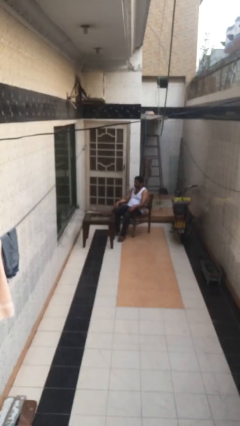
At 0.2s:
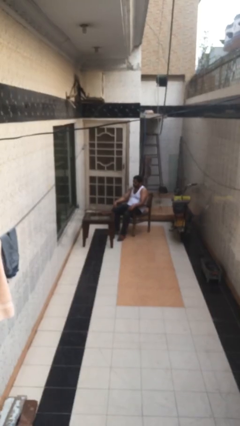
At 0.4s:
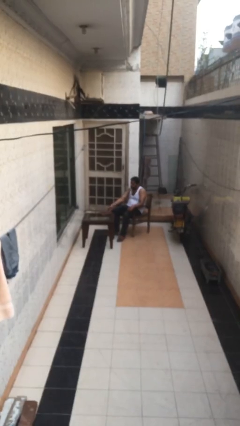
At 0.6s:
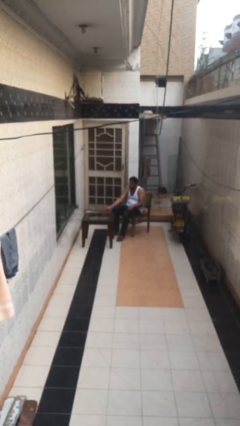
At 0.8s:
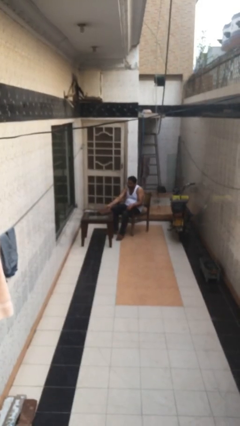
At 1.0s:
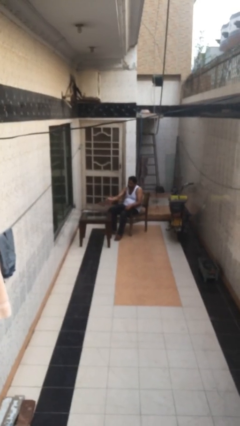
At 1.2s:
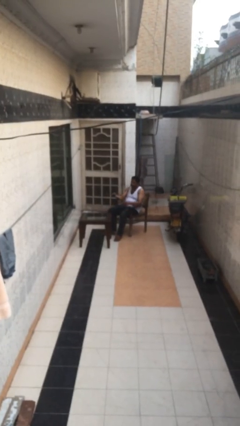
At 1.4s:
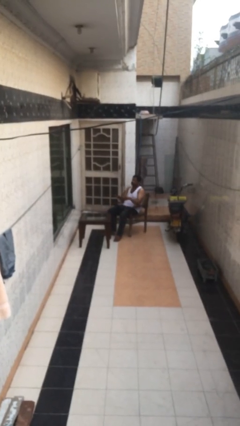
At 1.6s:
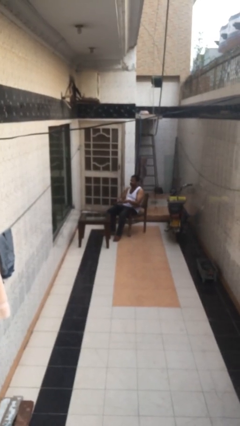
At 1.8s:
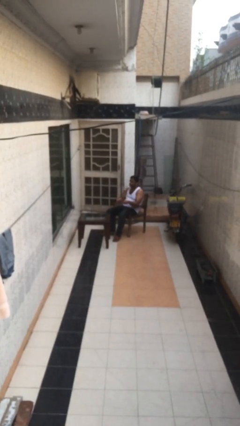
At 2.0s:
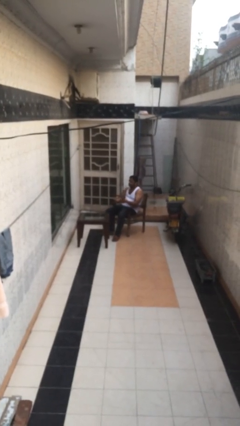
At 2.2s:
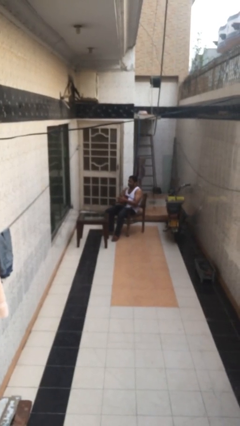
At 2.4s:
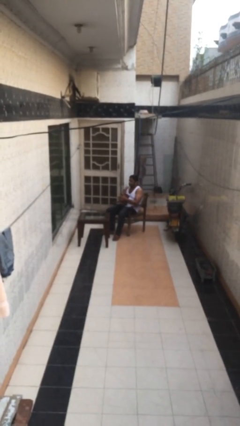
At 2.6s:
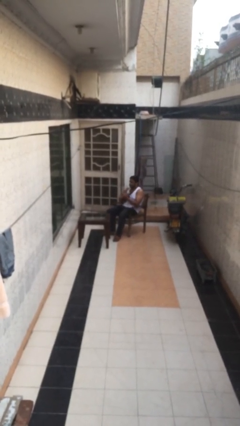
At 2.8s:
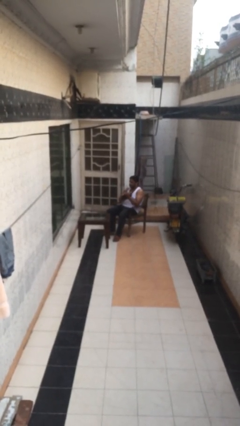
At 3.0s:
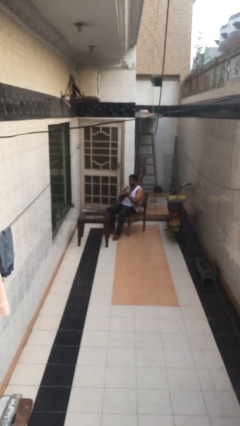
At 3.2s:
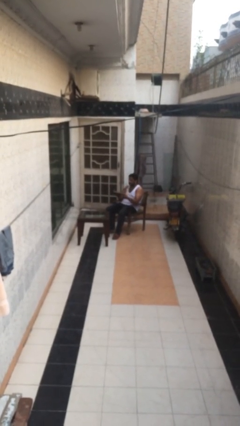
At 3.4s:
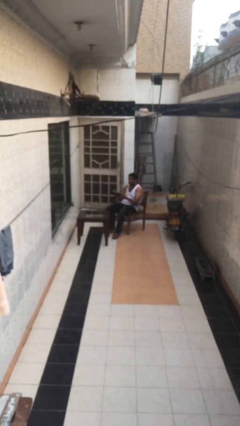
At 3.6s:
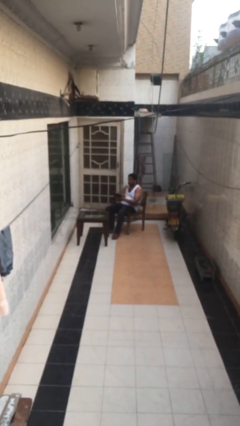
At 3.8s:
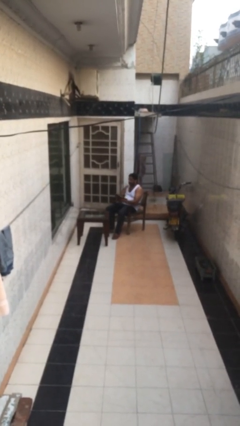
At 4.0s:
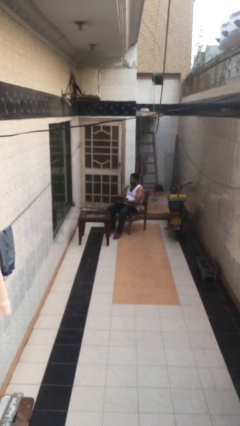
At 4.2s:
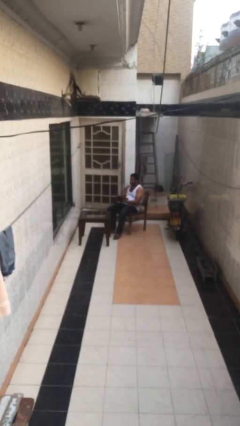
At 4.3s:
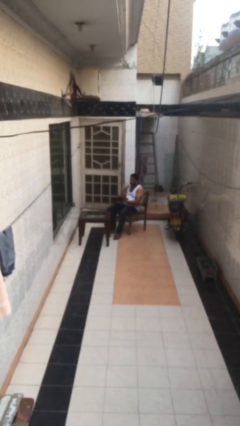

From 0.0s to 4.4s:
person picks up object from table

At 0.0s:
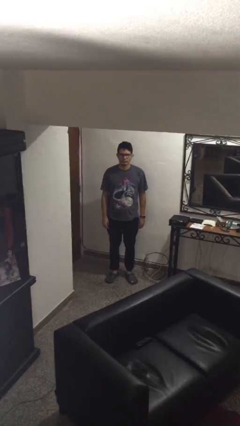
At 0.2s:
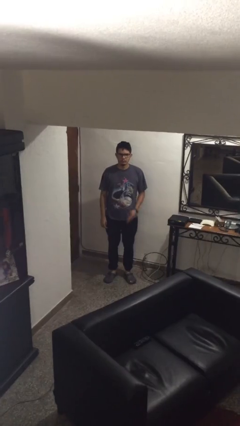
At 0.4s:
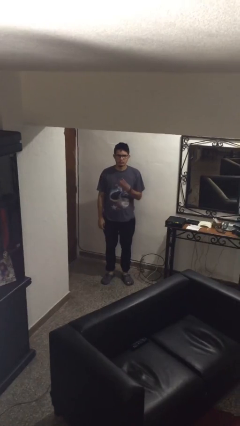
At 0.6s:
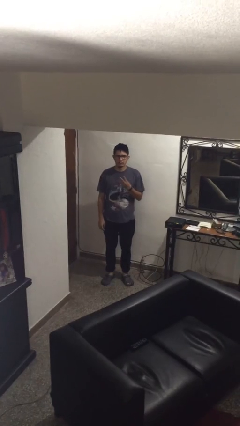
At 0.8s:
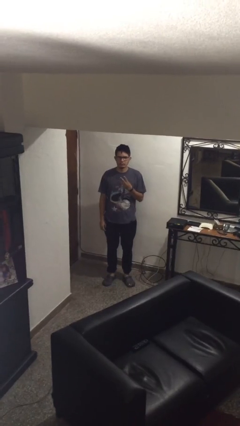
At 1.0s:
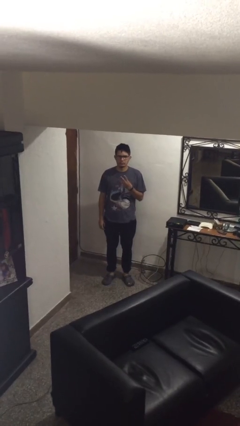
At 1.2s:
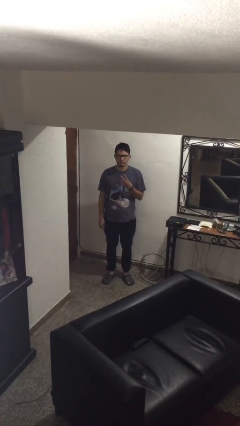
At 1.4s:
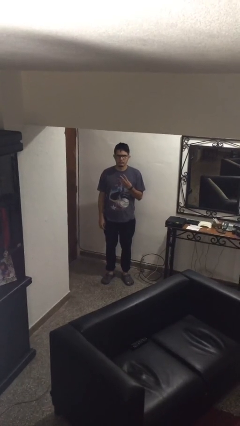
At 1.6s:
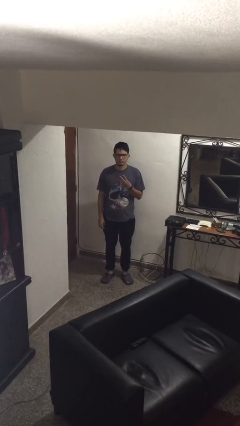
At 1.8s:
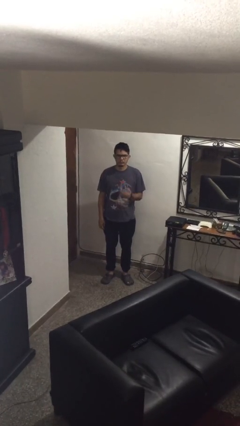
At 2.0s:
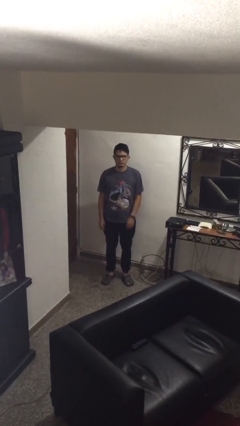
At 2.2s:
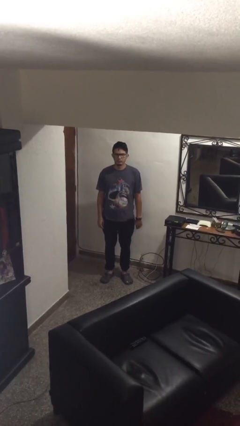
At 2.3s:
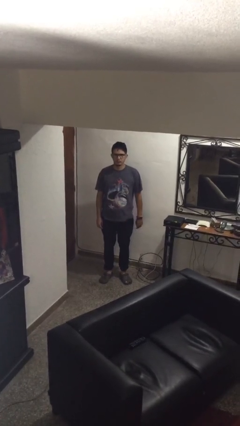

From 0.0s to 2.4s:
person gestures number three

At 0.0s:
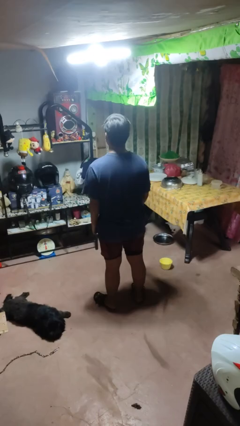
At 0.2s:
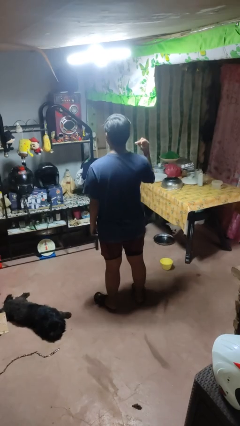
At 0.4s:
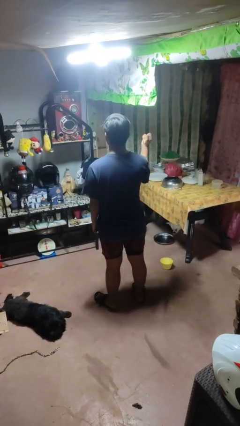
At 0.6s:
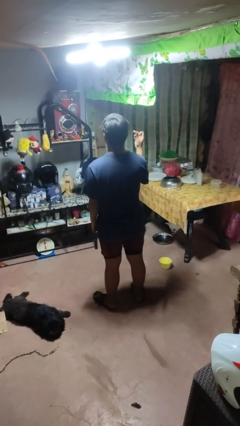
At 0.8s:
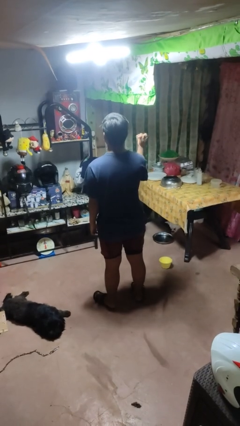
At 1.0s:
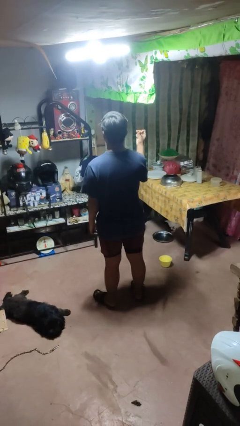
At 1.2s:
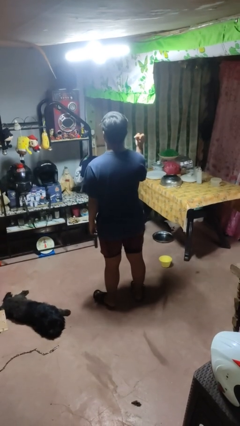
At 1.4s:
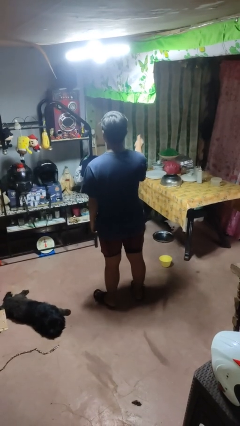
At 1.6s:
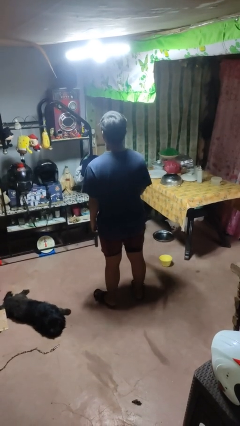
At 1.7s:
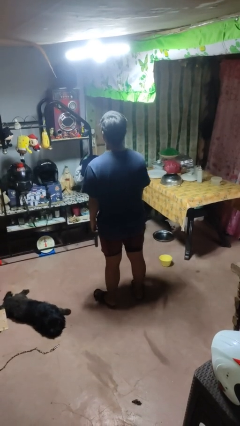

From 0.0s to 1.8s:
person snaps fingers

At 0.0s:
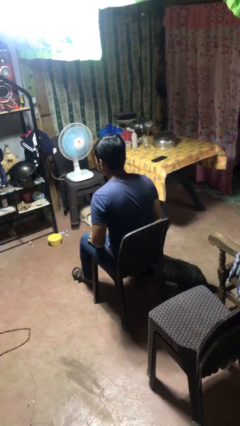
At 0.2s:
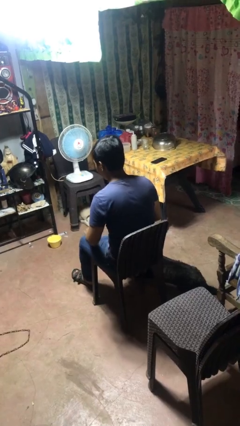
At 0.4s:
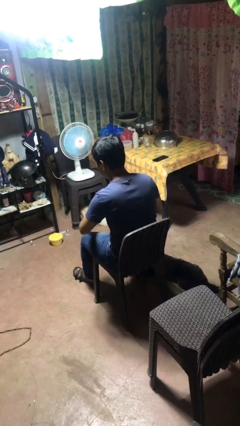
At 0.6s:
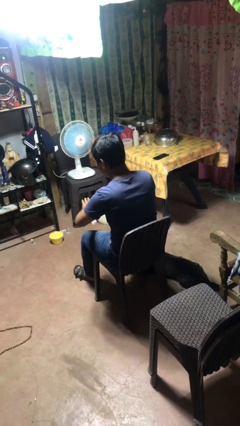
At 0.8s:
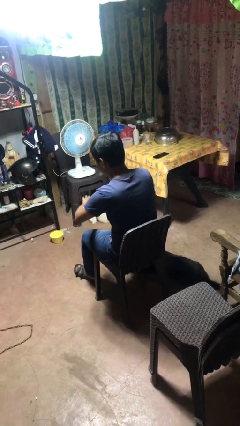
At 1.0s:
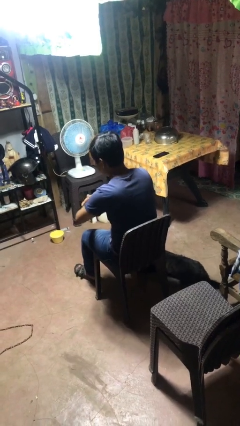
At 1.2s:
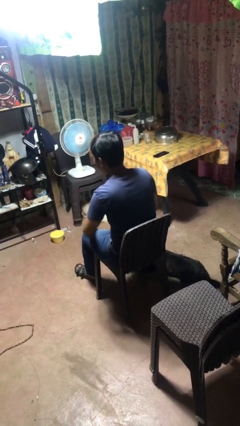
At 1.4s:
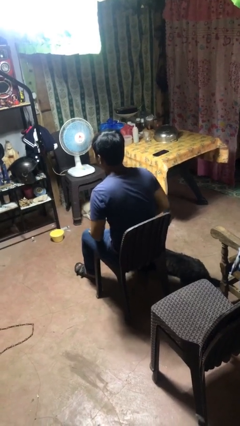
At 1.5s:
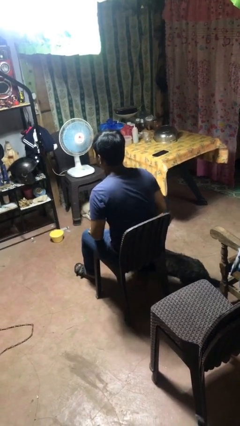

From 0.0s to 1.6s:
person swats bug

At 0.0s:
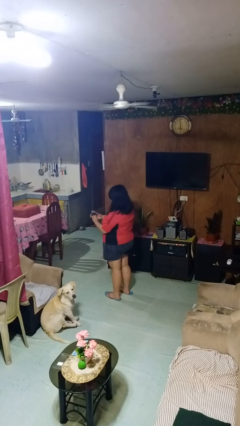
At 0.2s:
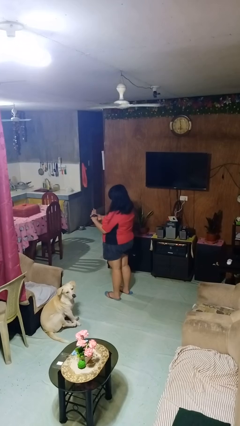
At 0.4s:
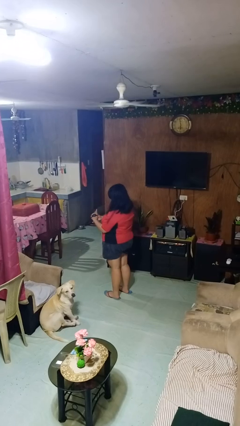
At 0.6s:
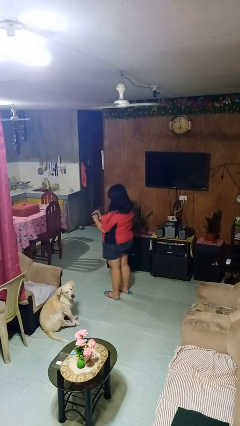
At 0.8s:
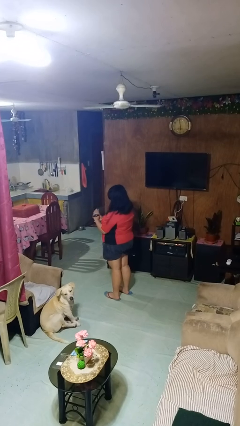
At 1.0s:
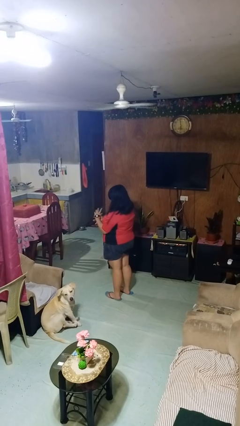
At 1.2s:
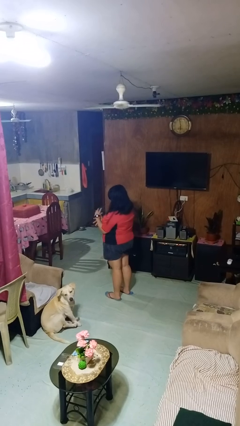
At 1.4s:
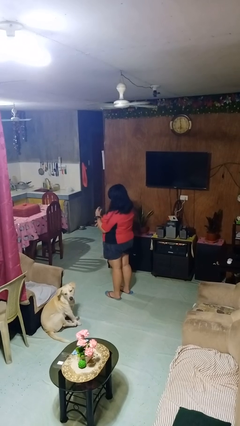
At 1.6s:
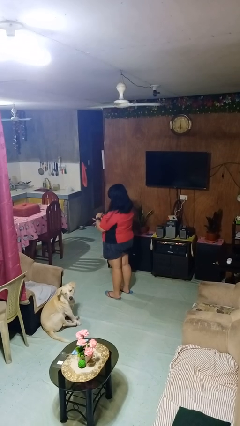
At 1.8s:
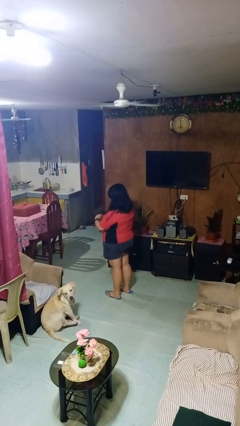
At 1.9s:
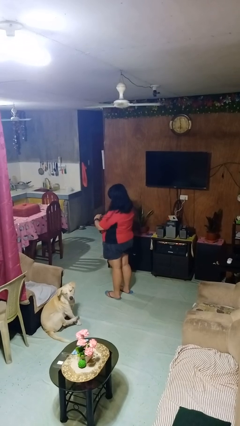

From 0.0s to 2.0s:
person puts on wristwatch

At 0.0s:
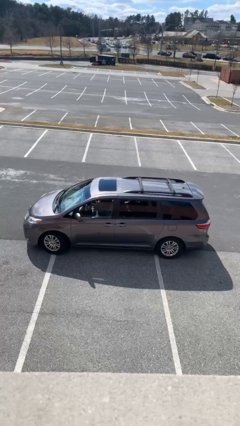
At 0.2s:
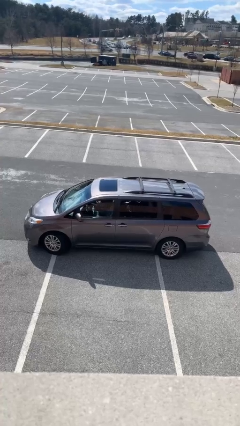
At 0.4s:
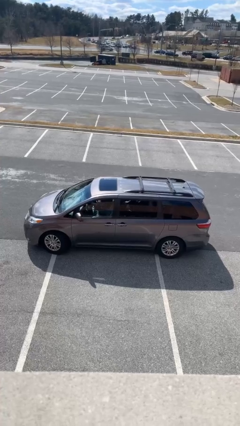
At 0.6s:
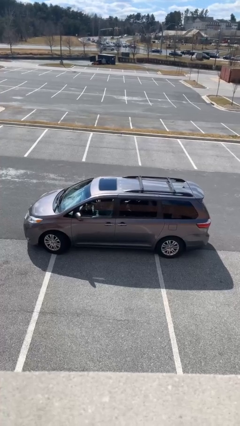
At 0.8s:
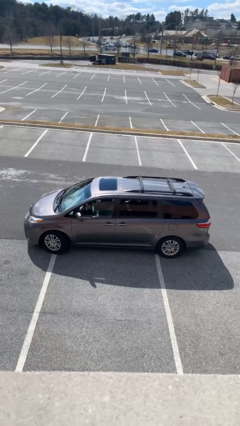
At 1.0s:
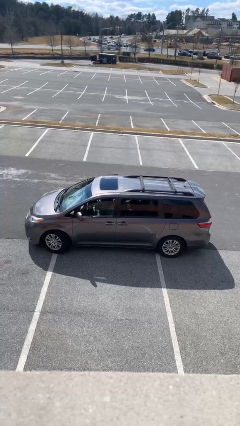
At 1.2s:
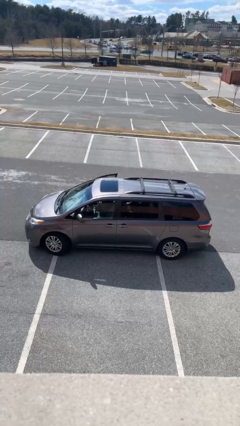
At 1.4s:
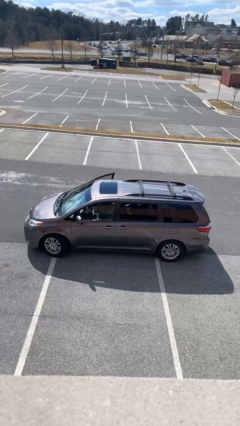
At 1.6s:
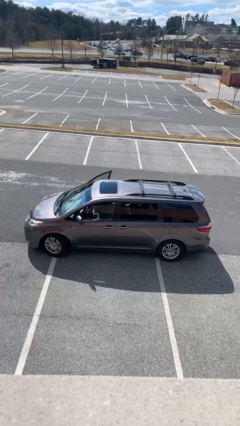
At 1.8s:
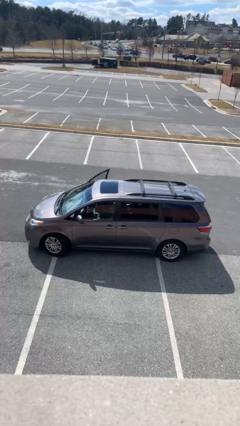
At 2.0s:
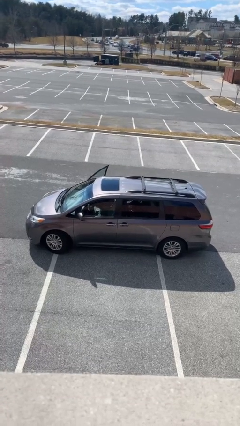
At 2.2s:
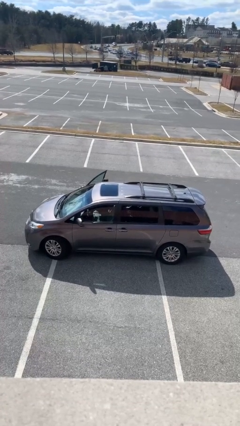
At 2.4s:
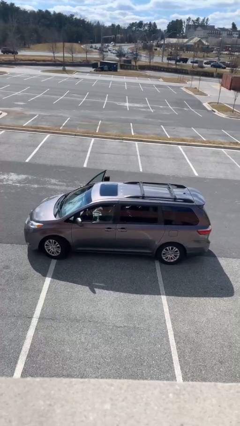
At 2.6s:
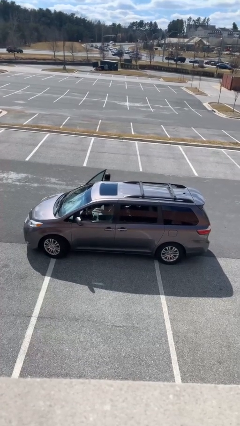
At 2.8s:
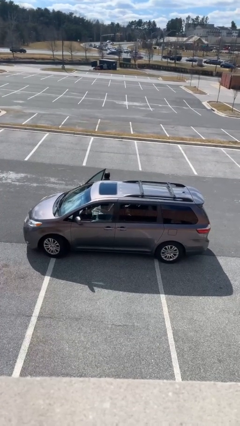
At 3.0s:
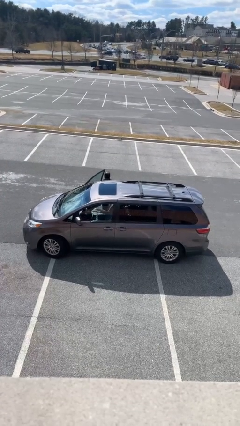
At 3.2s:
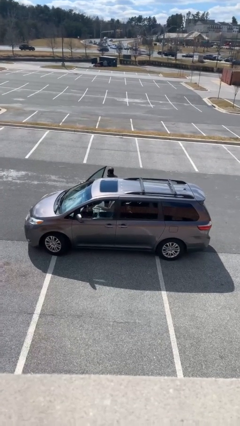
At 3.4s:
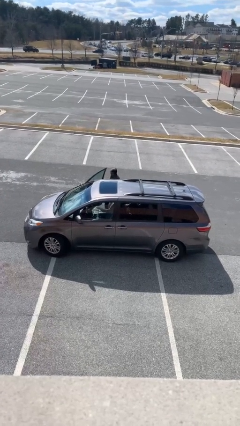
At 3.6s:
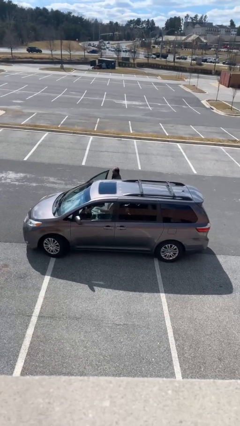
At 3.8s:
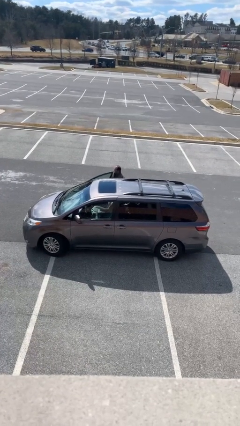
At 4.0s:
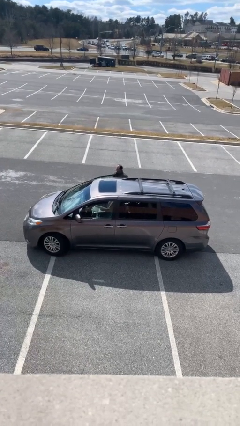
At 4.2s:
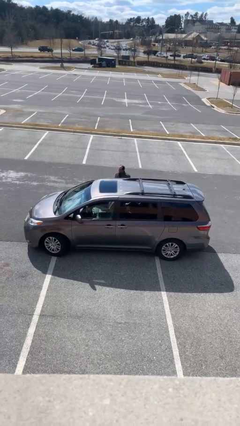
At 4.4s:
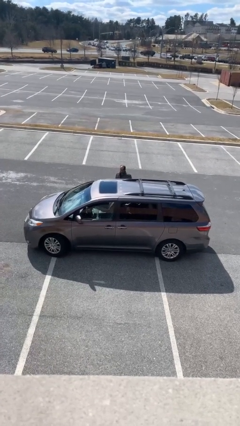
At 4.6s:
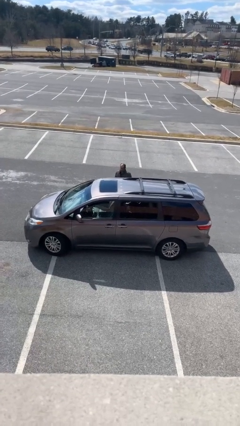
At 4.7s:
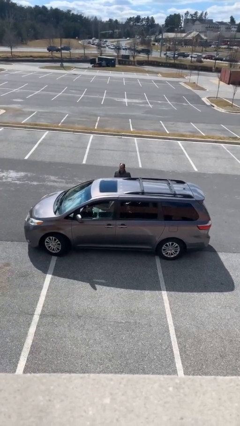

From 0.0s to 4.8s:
car drops off person

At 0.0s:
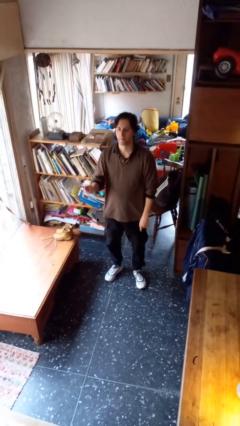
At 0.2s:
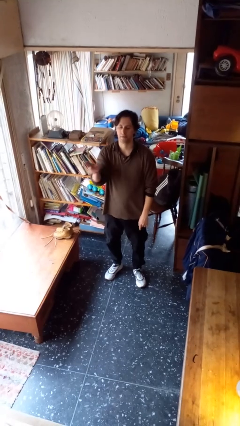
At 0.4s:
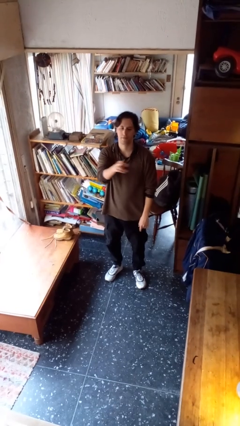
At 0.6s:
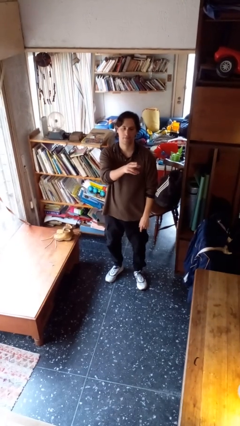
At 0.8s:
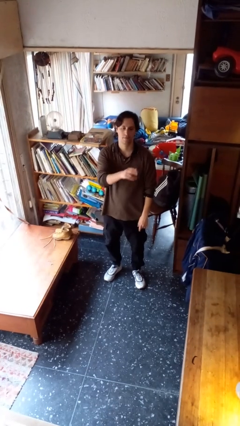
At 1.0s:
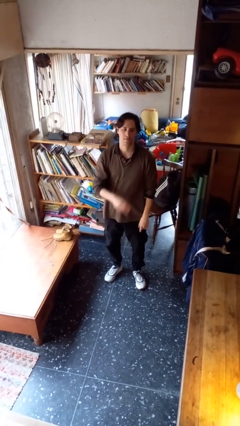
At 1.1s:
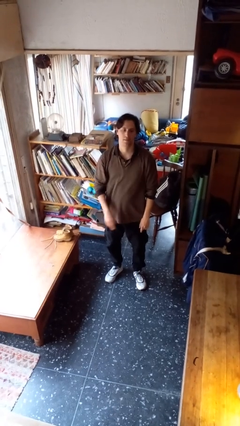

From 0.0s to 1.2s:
person gestures swipe left
